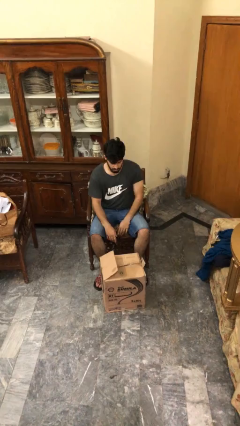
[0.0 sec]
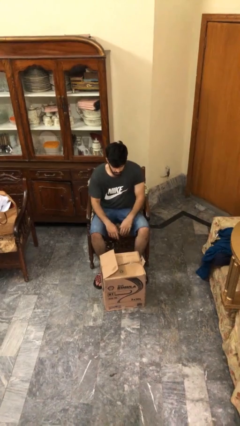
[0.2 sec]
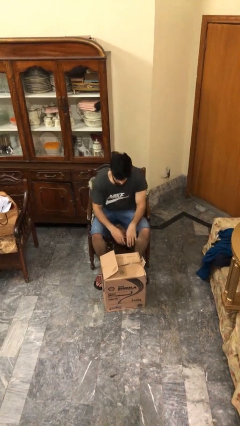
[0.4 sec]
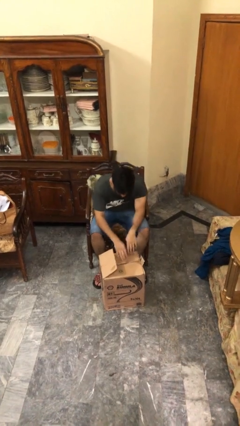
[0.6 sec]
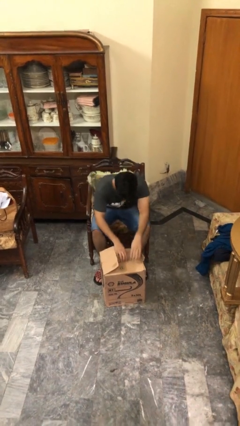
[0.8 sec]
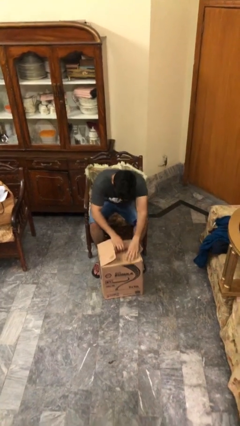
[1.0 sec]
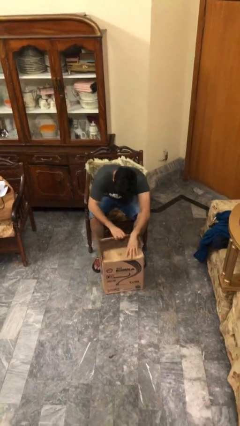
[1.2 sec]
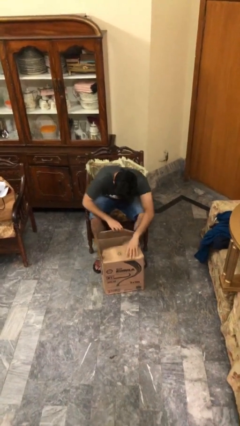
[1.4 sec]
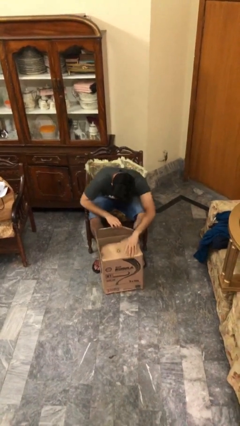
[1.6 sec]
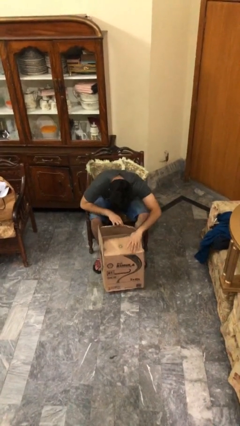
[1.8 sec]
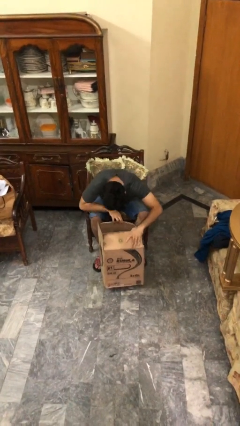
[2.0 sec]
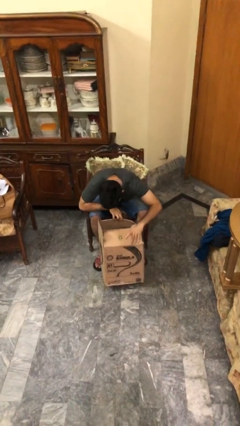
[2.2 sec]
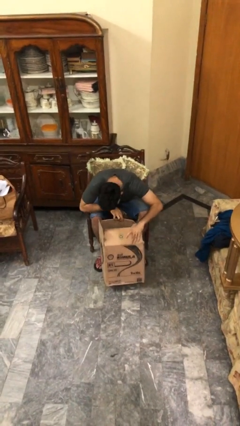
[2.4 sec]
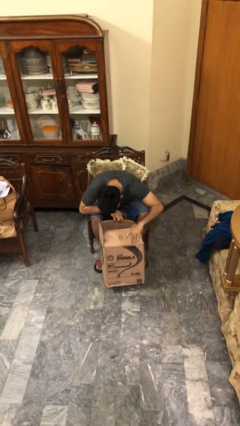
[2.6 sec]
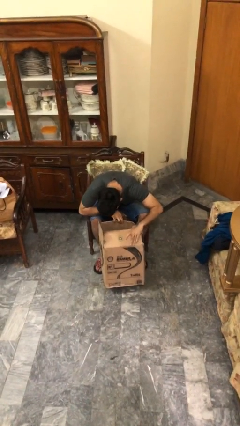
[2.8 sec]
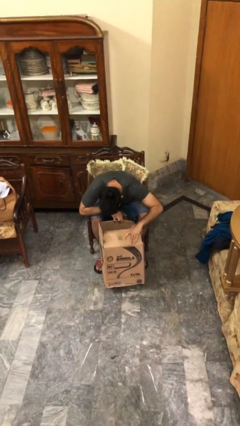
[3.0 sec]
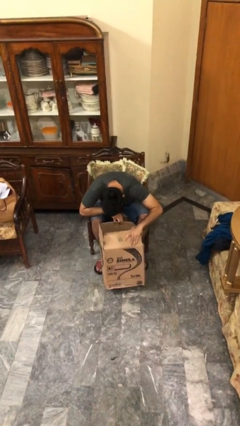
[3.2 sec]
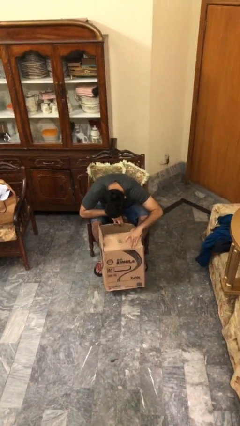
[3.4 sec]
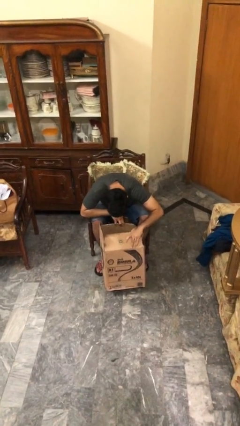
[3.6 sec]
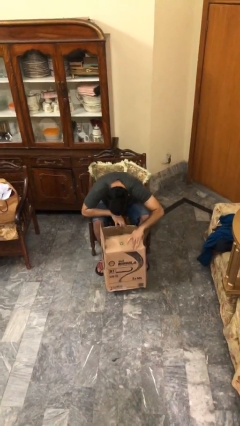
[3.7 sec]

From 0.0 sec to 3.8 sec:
person searches in box

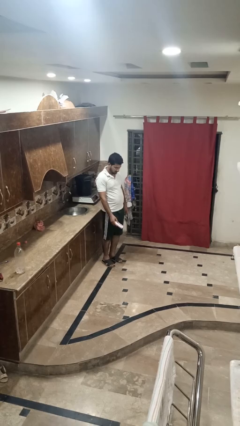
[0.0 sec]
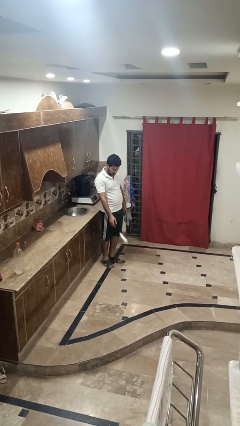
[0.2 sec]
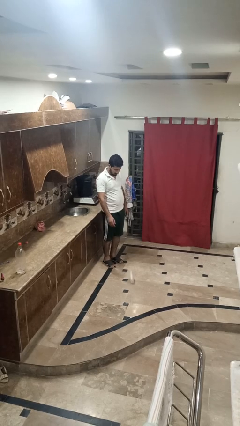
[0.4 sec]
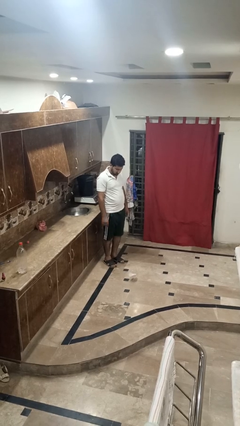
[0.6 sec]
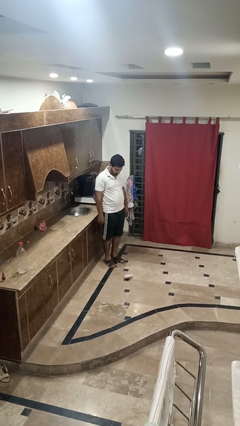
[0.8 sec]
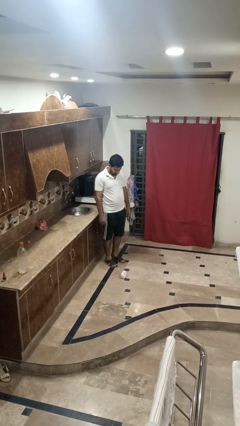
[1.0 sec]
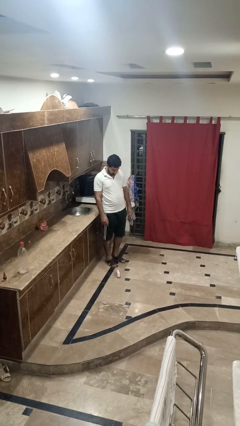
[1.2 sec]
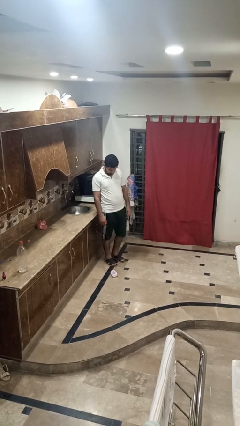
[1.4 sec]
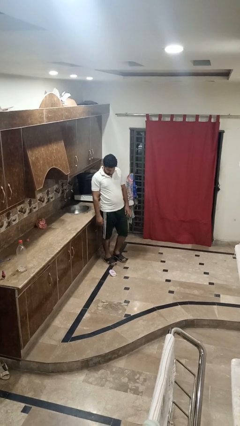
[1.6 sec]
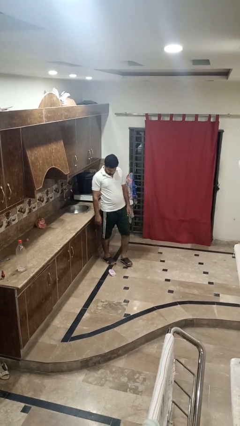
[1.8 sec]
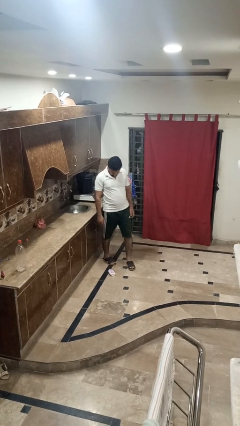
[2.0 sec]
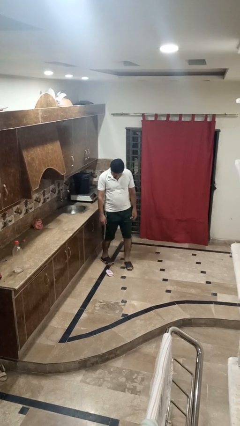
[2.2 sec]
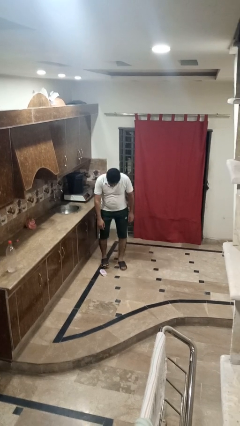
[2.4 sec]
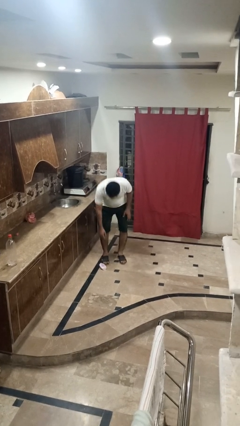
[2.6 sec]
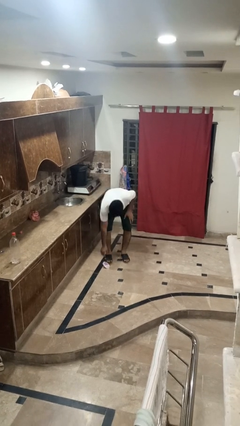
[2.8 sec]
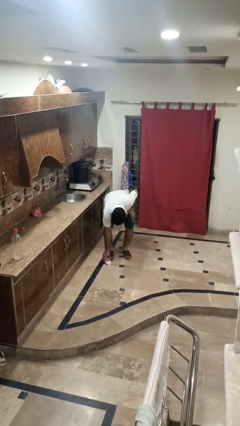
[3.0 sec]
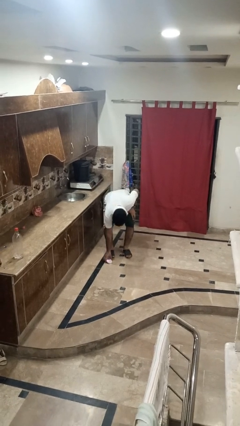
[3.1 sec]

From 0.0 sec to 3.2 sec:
person throws object to ground

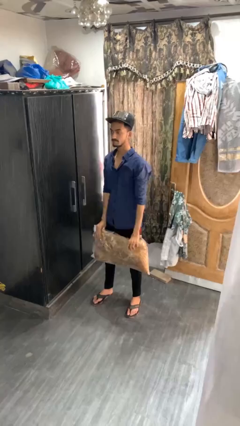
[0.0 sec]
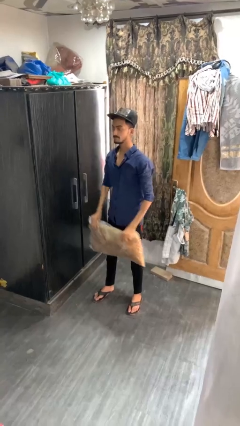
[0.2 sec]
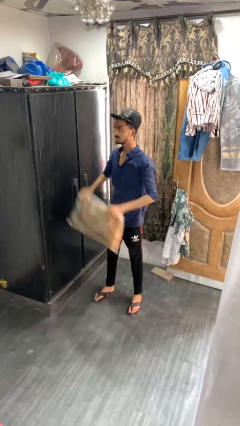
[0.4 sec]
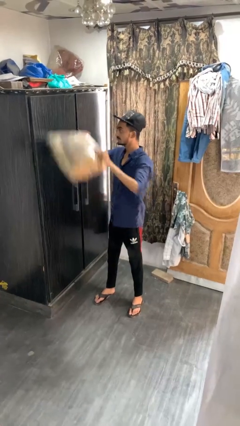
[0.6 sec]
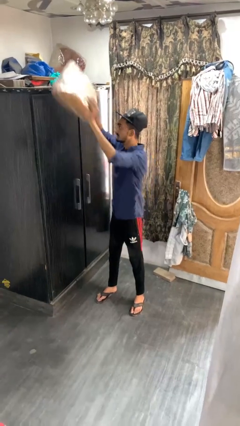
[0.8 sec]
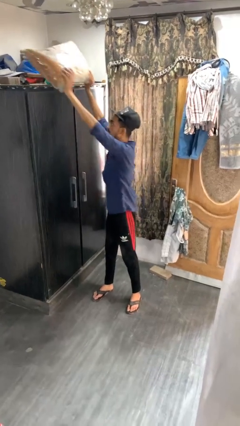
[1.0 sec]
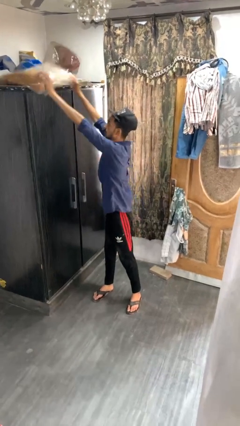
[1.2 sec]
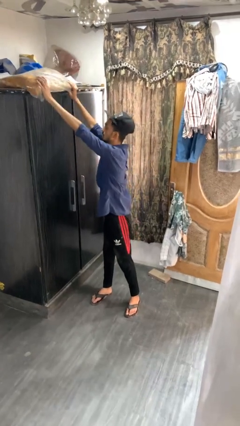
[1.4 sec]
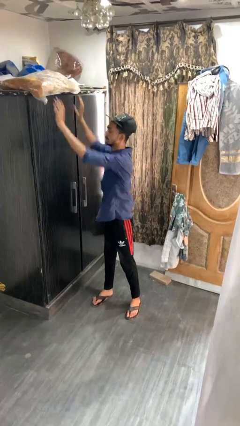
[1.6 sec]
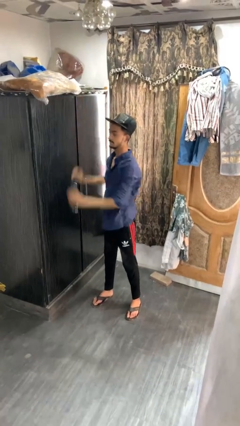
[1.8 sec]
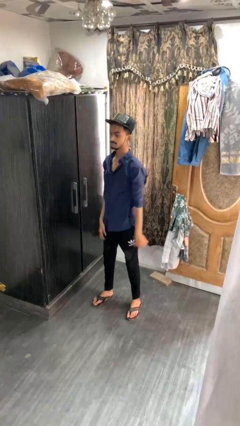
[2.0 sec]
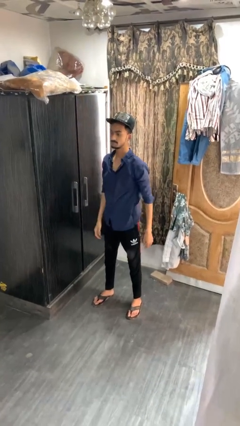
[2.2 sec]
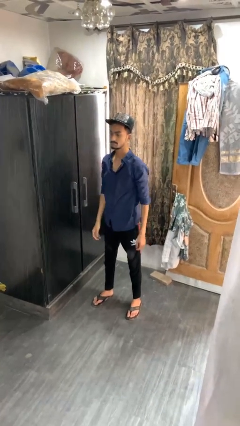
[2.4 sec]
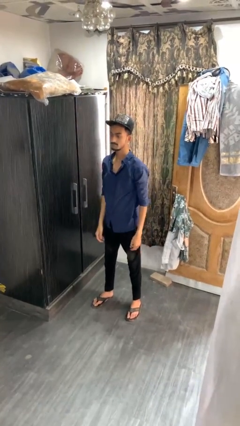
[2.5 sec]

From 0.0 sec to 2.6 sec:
person puts down object on shelf

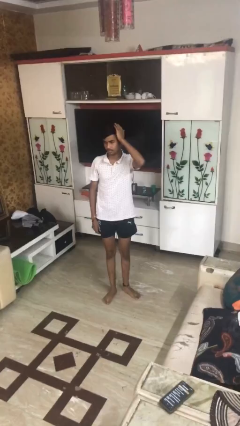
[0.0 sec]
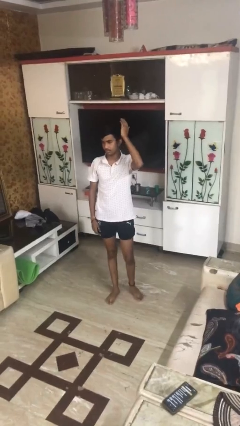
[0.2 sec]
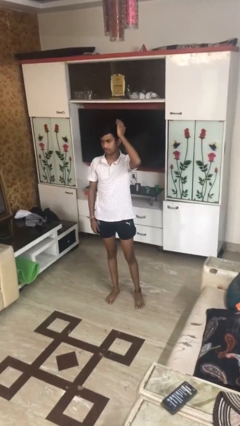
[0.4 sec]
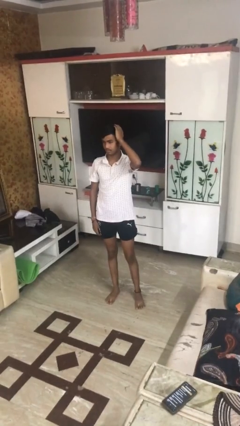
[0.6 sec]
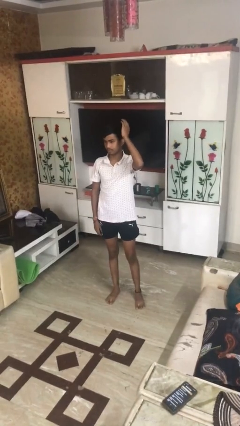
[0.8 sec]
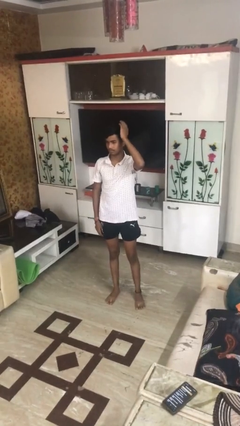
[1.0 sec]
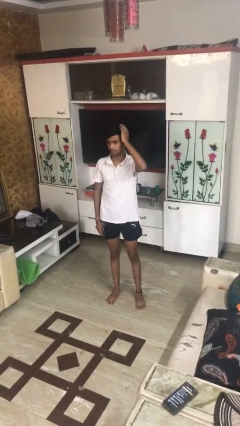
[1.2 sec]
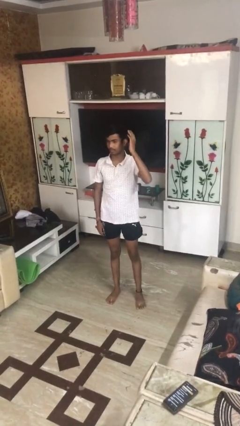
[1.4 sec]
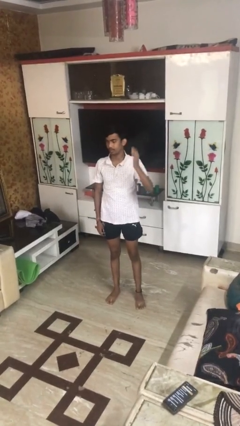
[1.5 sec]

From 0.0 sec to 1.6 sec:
person pats head

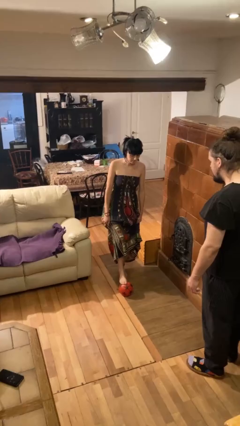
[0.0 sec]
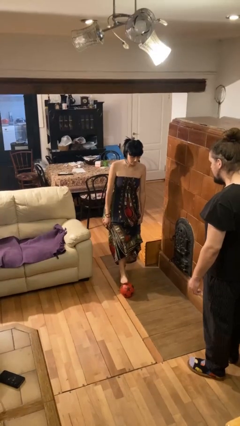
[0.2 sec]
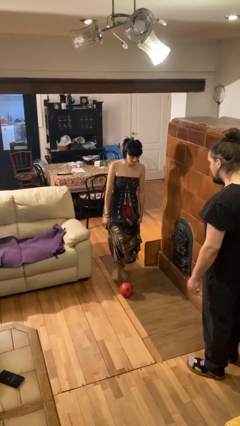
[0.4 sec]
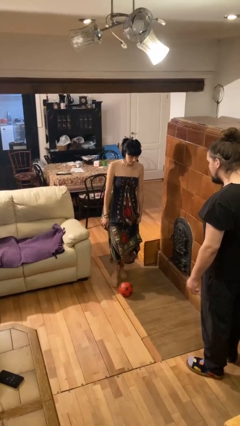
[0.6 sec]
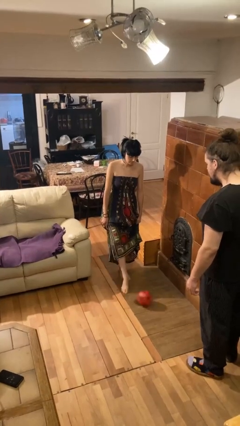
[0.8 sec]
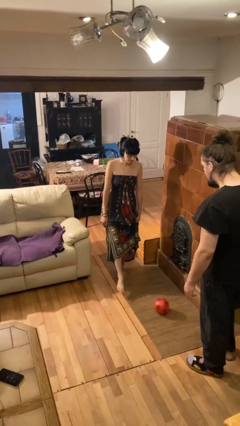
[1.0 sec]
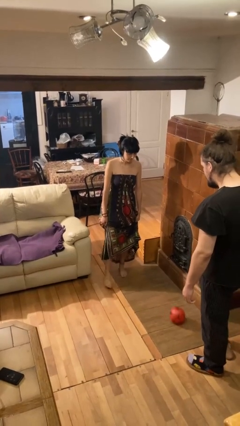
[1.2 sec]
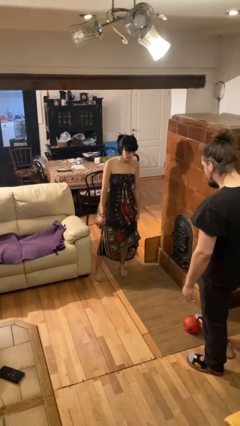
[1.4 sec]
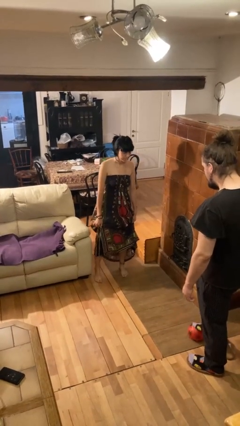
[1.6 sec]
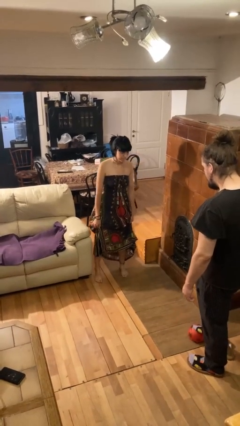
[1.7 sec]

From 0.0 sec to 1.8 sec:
person kicks object to person

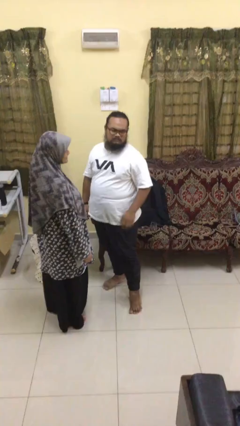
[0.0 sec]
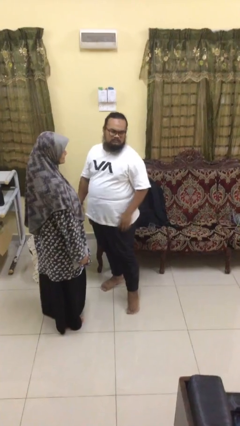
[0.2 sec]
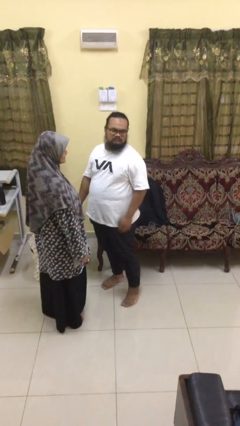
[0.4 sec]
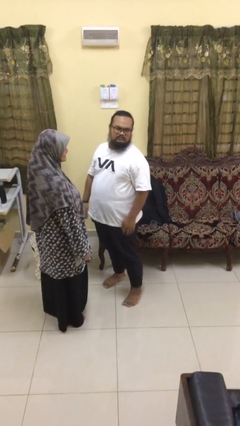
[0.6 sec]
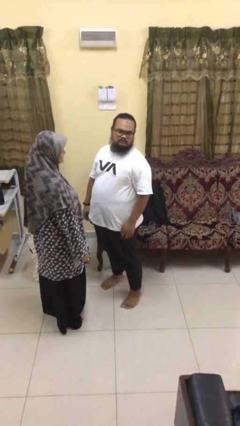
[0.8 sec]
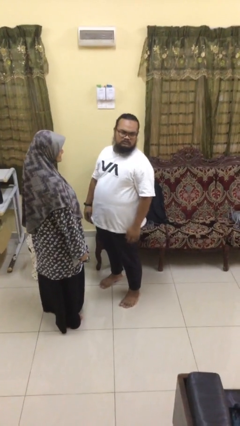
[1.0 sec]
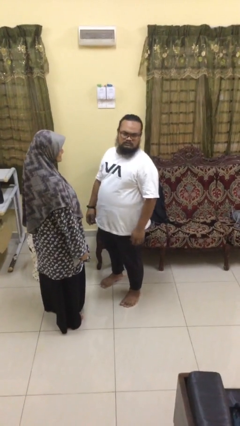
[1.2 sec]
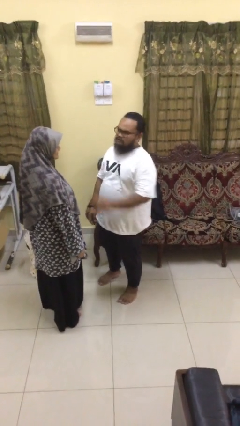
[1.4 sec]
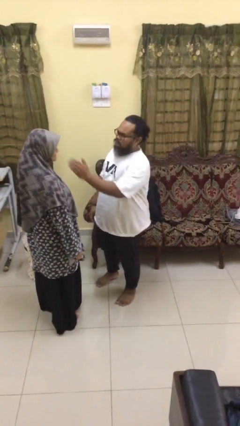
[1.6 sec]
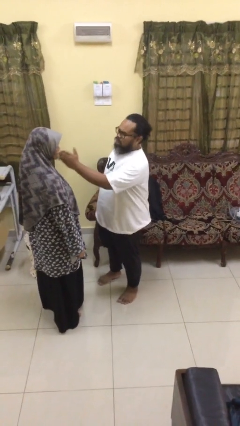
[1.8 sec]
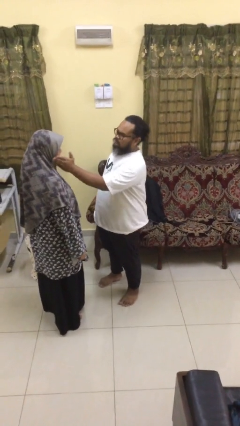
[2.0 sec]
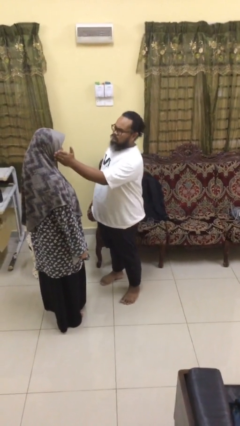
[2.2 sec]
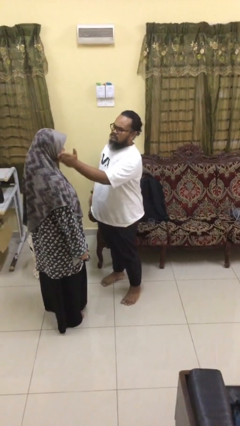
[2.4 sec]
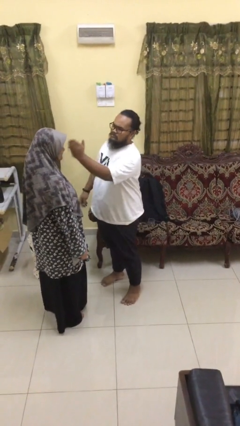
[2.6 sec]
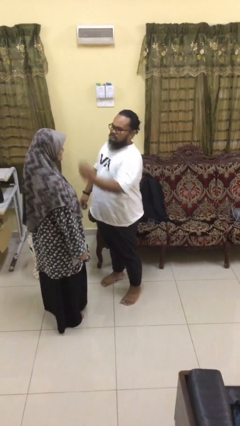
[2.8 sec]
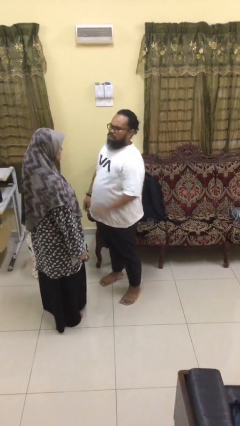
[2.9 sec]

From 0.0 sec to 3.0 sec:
person touches face of person

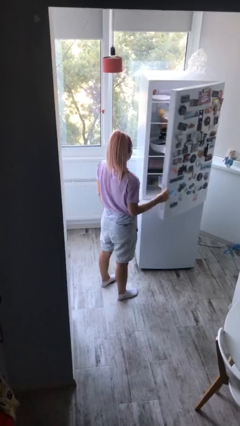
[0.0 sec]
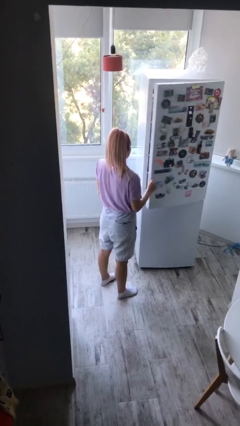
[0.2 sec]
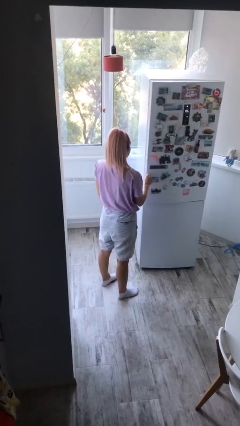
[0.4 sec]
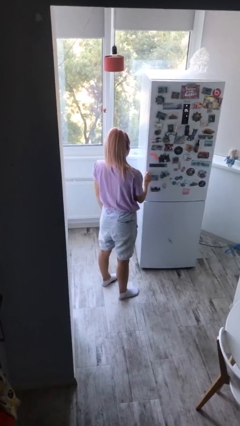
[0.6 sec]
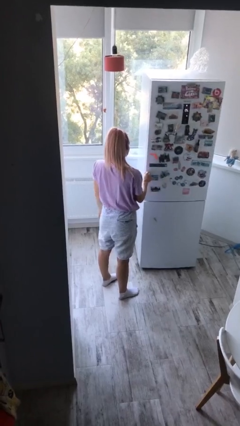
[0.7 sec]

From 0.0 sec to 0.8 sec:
person closes refrigerator

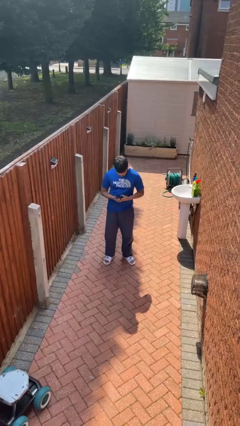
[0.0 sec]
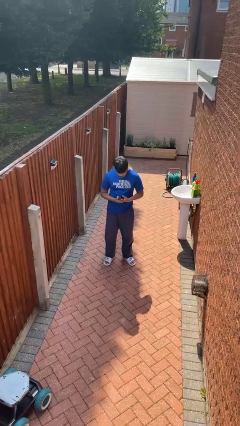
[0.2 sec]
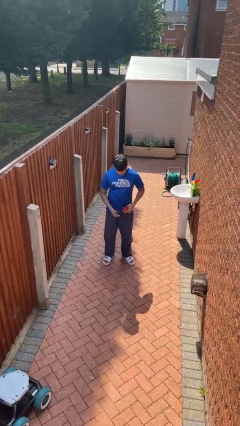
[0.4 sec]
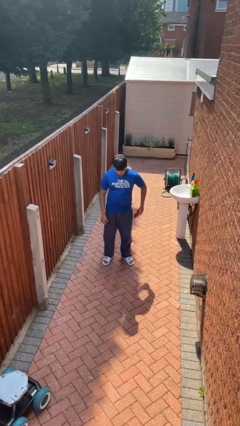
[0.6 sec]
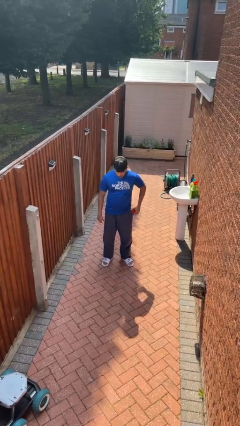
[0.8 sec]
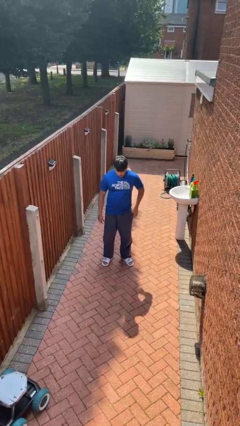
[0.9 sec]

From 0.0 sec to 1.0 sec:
person puts phone into pocket
